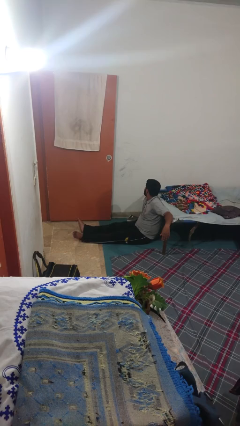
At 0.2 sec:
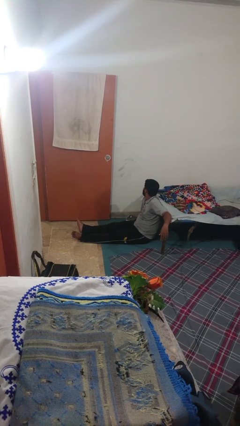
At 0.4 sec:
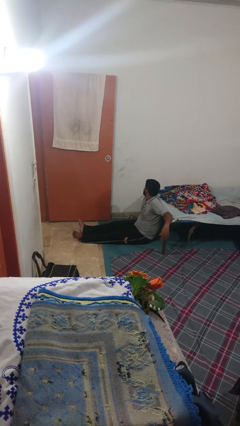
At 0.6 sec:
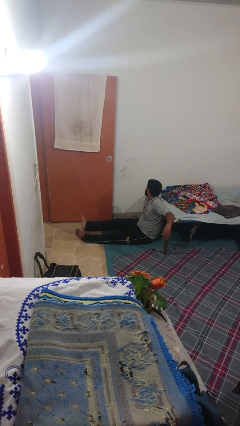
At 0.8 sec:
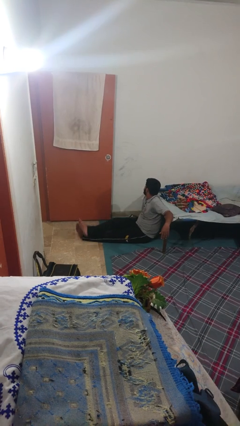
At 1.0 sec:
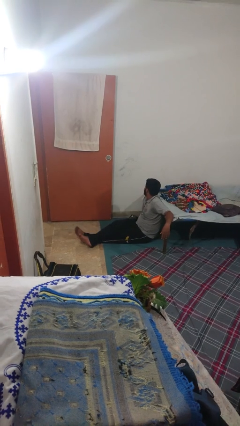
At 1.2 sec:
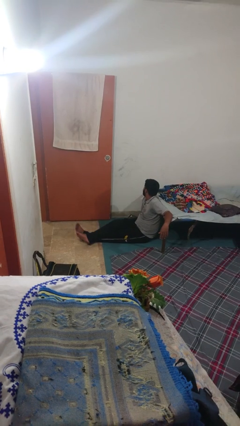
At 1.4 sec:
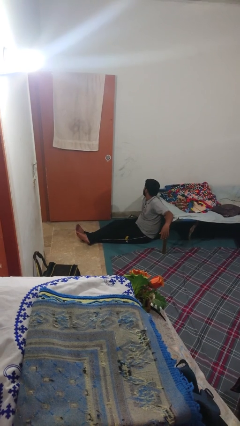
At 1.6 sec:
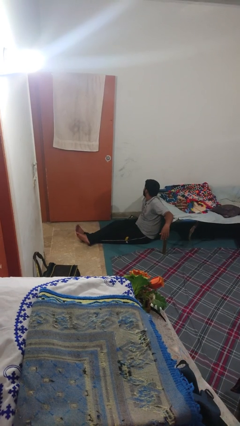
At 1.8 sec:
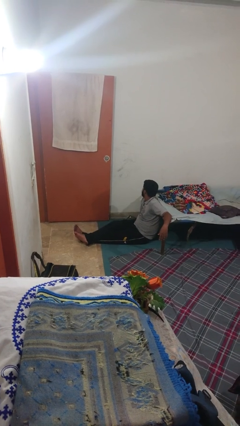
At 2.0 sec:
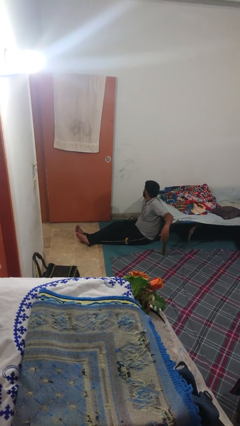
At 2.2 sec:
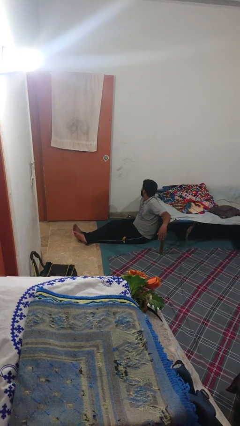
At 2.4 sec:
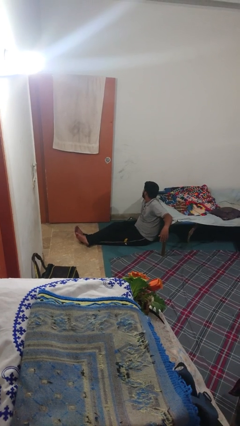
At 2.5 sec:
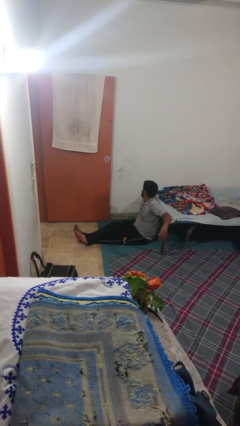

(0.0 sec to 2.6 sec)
person crosses legs

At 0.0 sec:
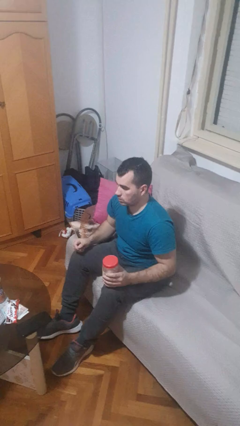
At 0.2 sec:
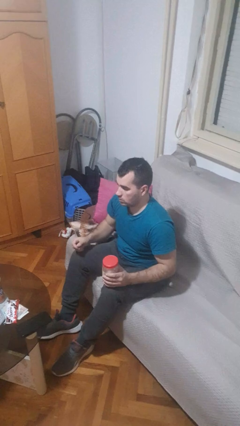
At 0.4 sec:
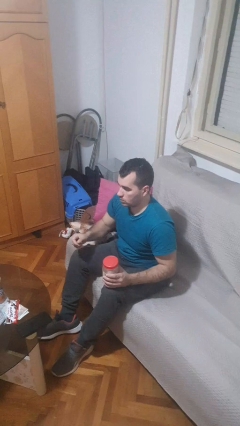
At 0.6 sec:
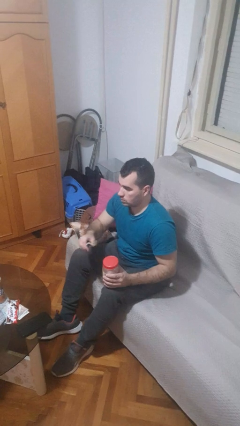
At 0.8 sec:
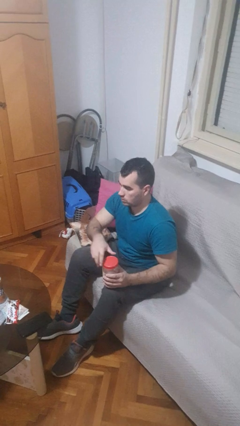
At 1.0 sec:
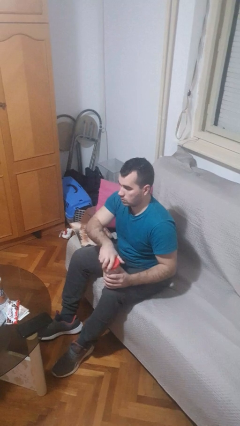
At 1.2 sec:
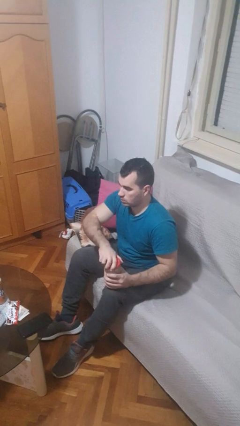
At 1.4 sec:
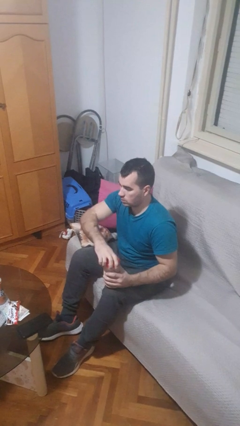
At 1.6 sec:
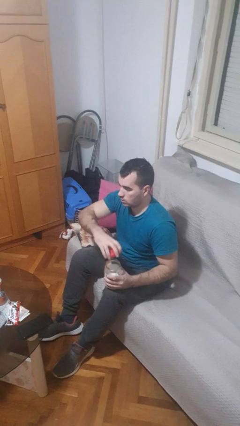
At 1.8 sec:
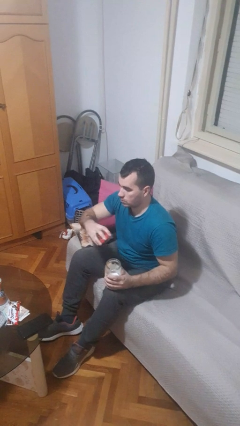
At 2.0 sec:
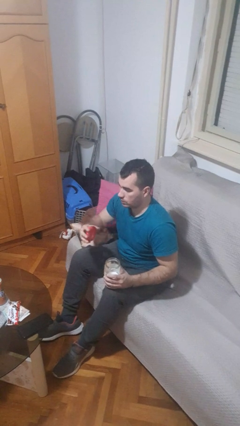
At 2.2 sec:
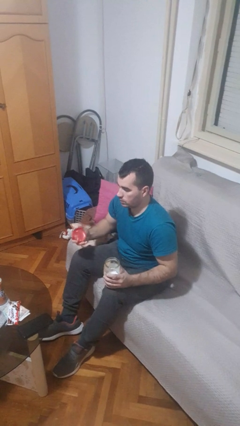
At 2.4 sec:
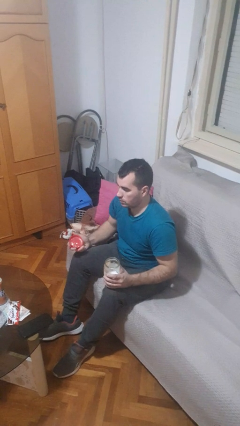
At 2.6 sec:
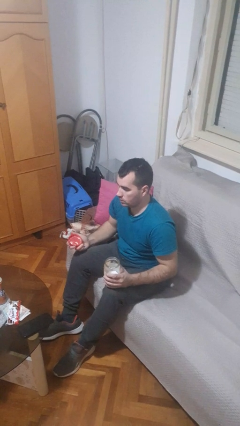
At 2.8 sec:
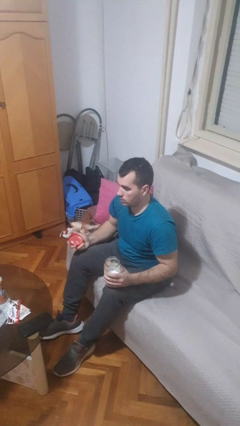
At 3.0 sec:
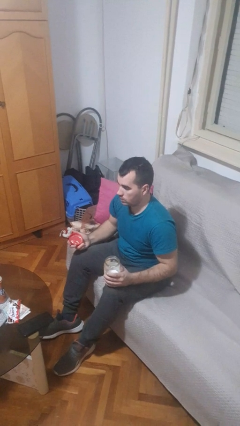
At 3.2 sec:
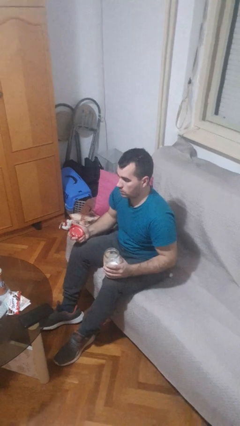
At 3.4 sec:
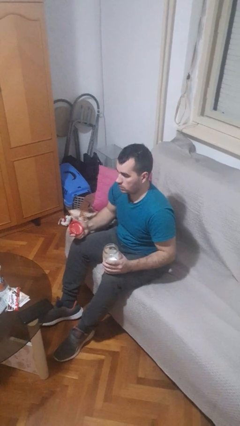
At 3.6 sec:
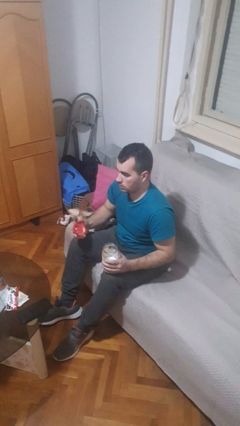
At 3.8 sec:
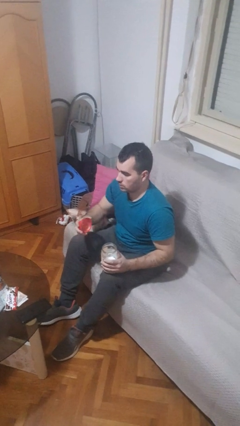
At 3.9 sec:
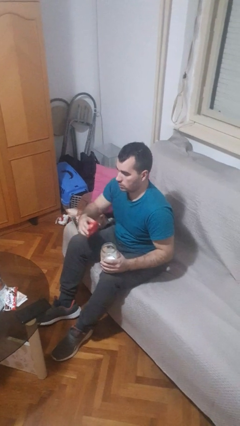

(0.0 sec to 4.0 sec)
person opens jar

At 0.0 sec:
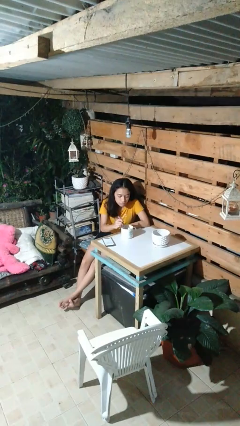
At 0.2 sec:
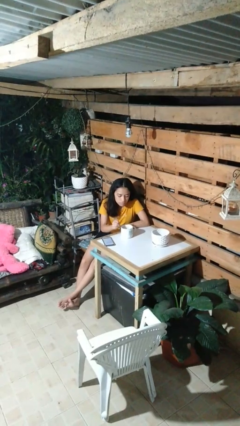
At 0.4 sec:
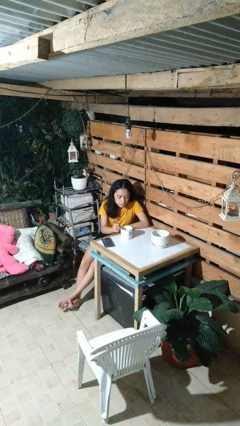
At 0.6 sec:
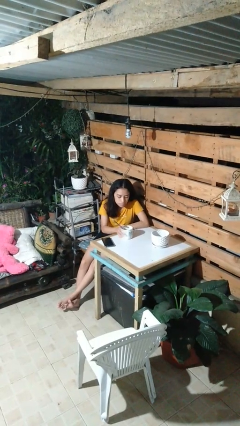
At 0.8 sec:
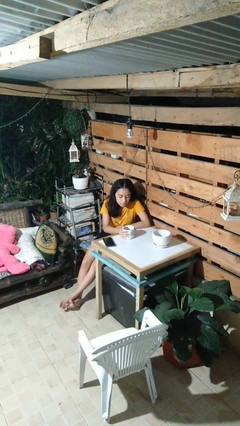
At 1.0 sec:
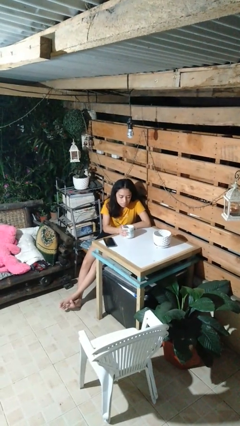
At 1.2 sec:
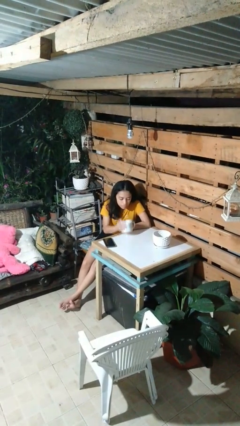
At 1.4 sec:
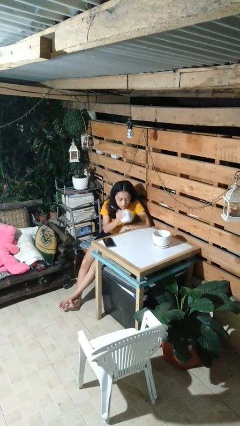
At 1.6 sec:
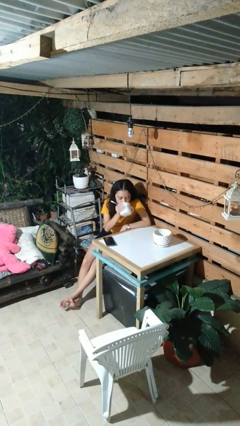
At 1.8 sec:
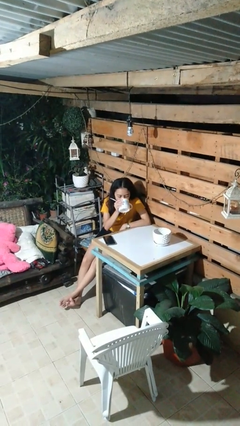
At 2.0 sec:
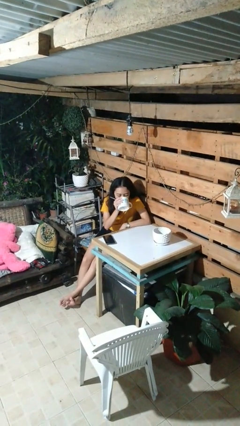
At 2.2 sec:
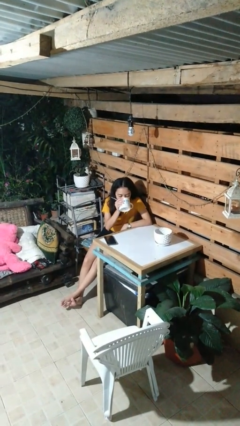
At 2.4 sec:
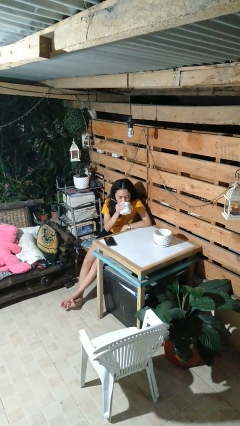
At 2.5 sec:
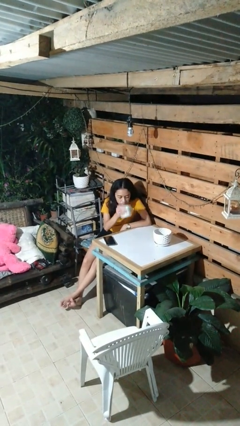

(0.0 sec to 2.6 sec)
person drinks from mug

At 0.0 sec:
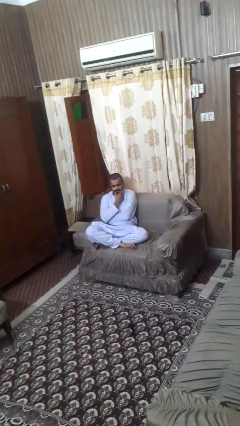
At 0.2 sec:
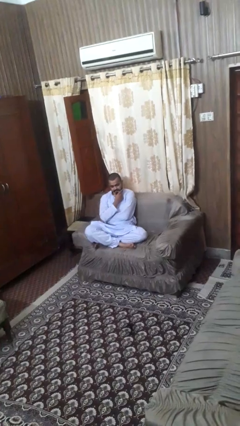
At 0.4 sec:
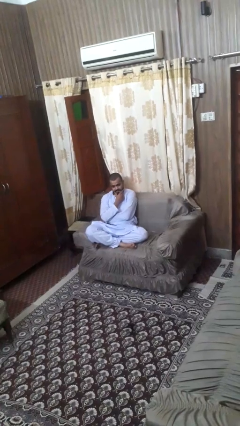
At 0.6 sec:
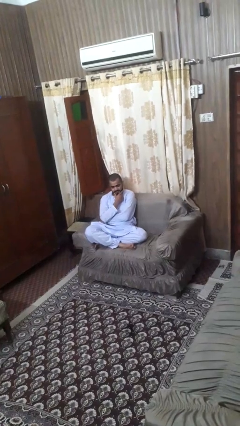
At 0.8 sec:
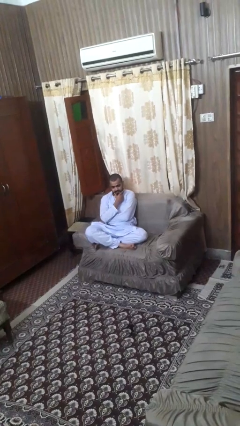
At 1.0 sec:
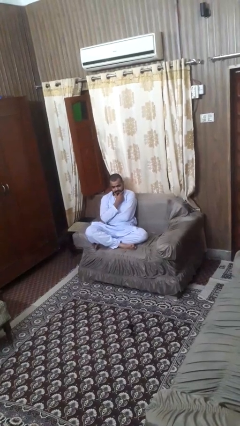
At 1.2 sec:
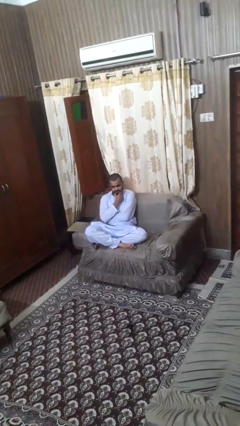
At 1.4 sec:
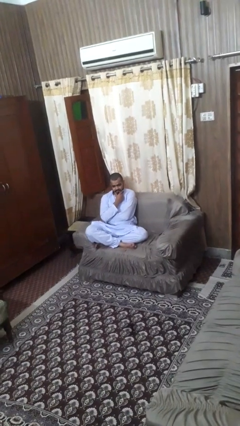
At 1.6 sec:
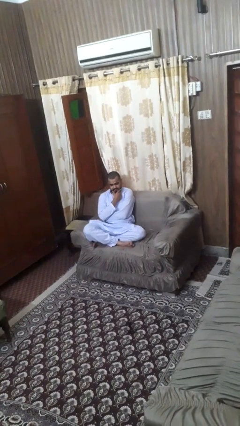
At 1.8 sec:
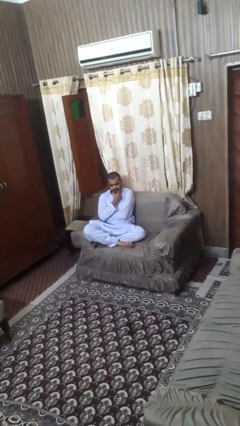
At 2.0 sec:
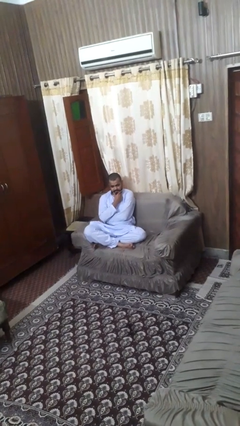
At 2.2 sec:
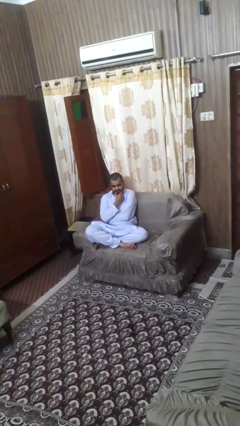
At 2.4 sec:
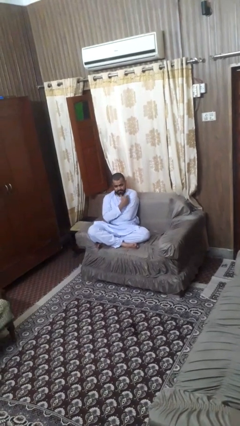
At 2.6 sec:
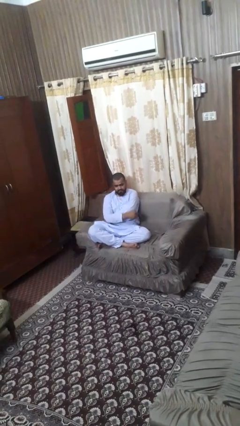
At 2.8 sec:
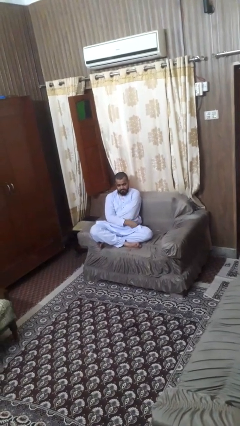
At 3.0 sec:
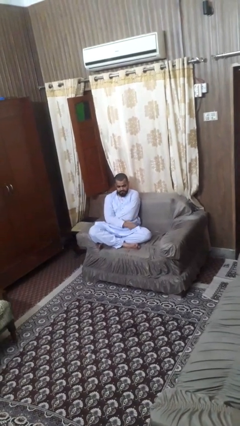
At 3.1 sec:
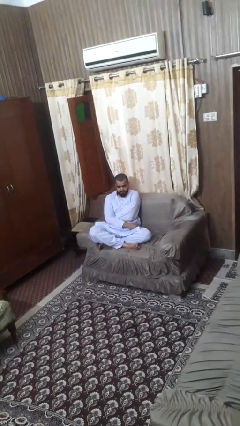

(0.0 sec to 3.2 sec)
person strokes chin

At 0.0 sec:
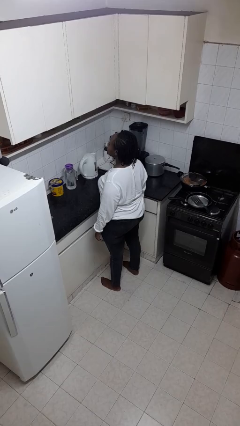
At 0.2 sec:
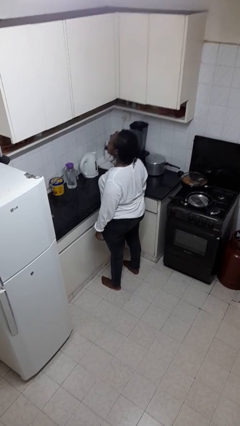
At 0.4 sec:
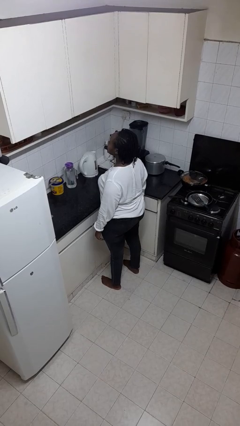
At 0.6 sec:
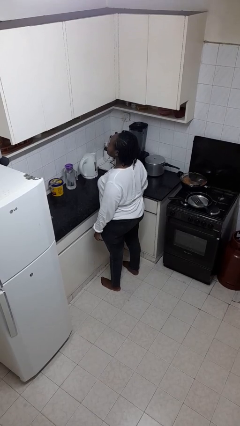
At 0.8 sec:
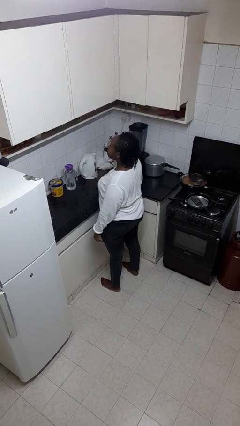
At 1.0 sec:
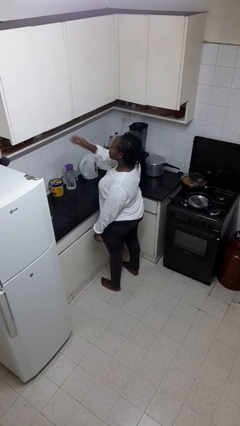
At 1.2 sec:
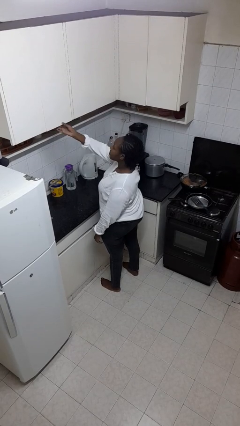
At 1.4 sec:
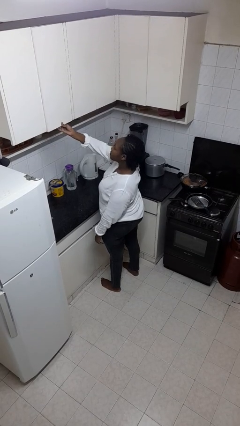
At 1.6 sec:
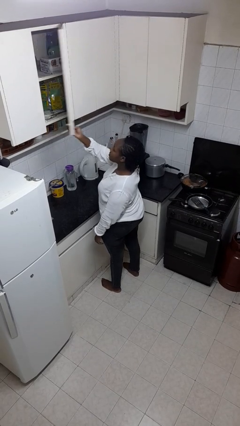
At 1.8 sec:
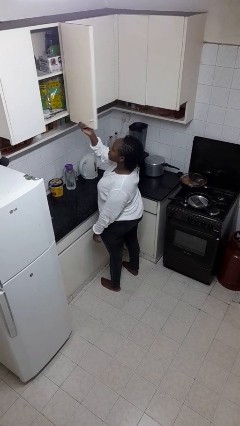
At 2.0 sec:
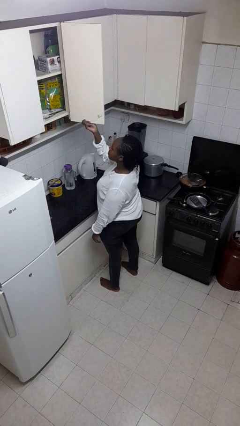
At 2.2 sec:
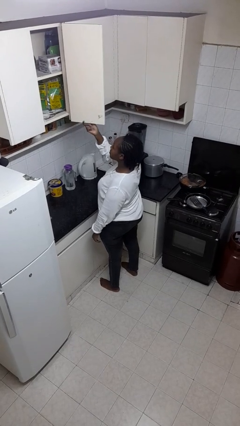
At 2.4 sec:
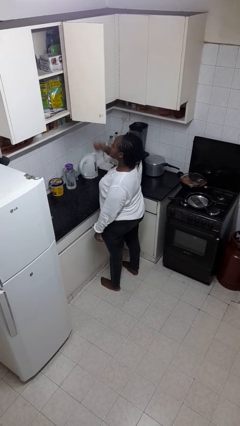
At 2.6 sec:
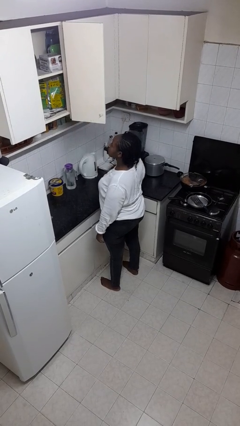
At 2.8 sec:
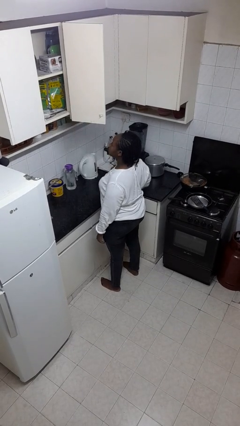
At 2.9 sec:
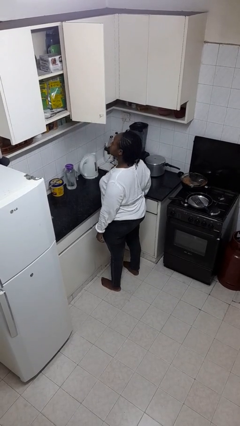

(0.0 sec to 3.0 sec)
person opens cabinet

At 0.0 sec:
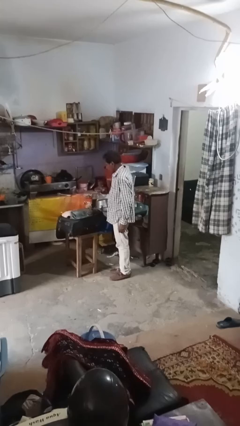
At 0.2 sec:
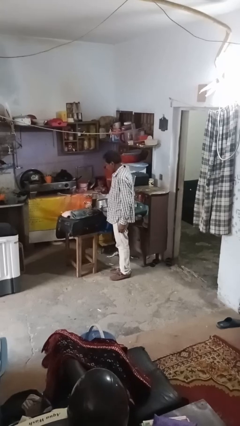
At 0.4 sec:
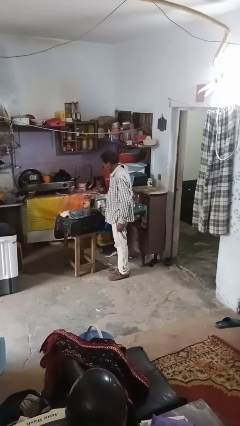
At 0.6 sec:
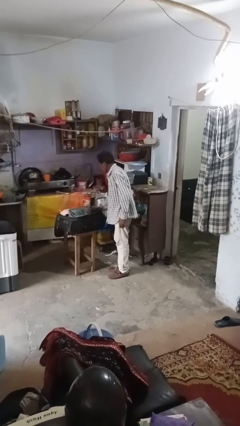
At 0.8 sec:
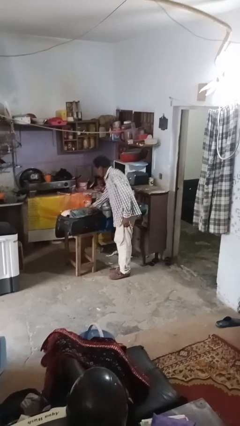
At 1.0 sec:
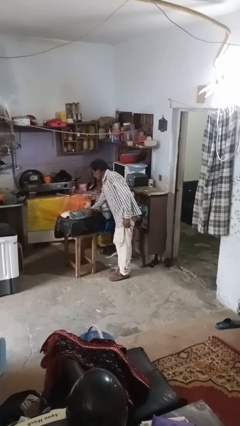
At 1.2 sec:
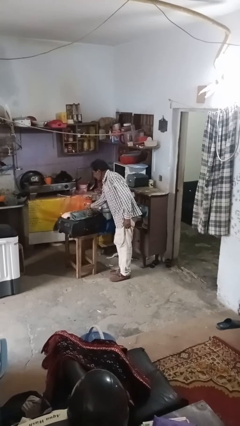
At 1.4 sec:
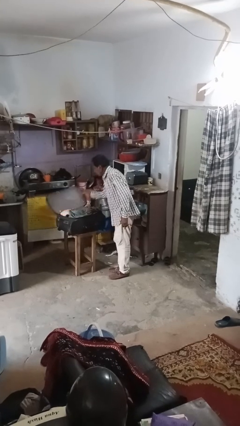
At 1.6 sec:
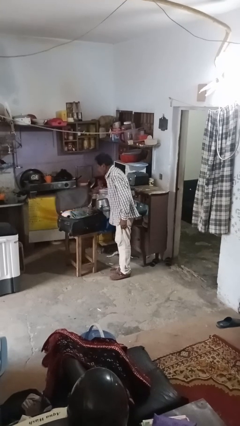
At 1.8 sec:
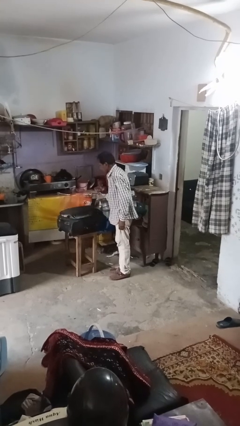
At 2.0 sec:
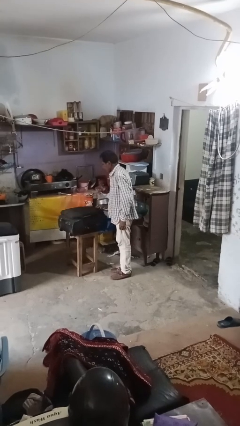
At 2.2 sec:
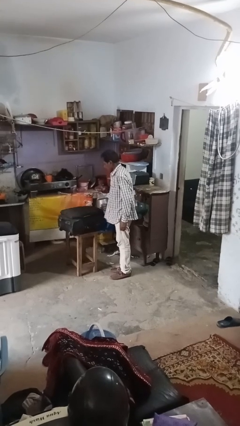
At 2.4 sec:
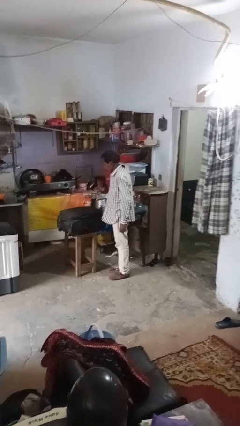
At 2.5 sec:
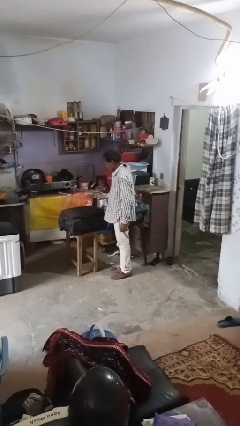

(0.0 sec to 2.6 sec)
person closes suitcase
